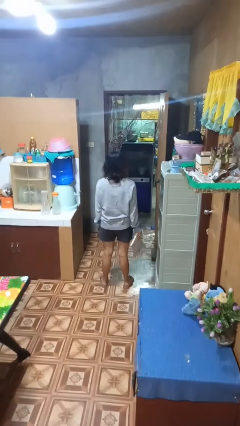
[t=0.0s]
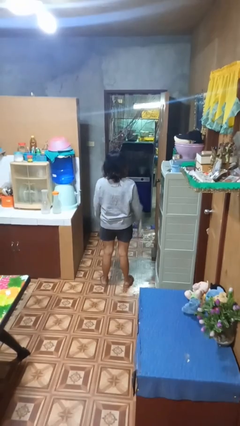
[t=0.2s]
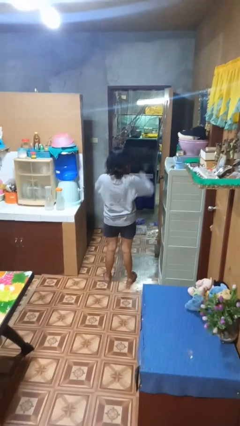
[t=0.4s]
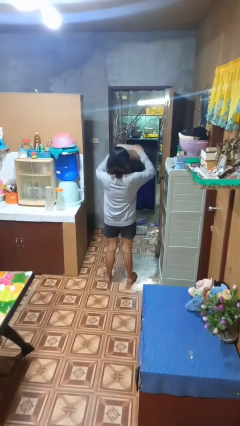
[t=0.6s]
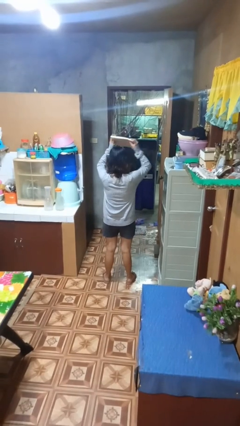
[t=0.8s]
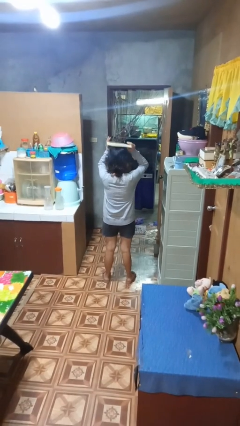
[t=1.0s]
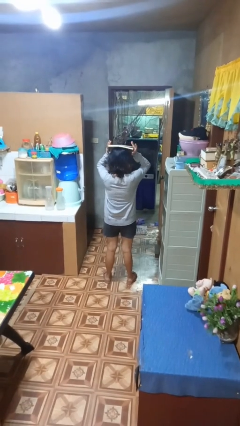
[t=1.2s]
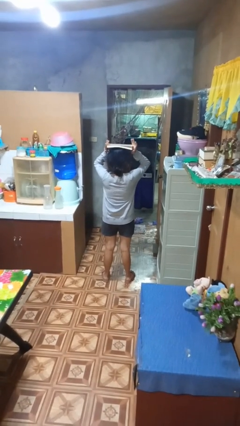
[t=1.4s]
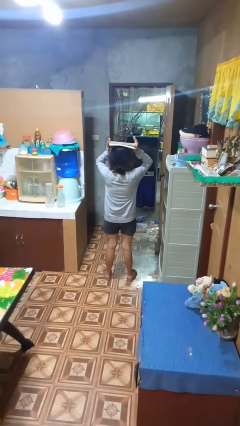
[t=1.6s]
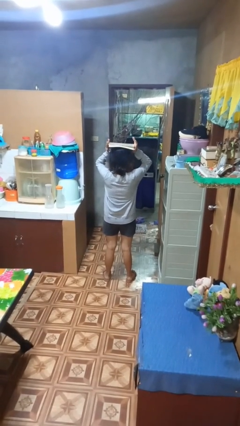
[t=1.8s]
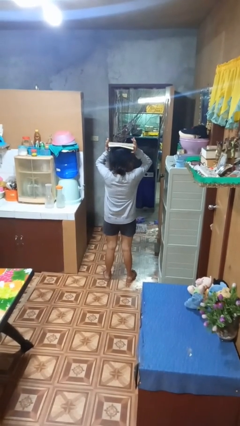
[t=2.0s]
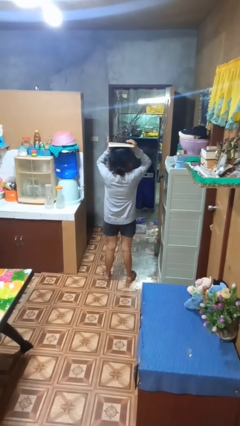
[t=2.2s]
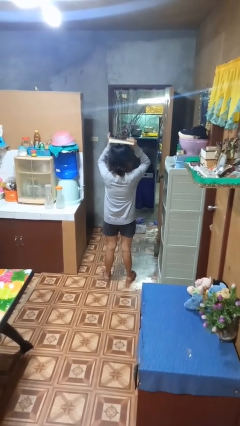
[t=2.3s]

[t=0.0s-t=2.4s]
person holds object above head

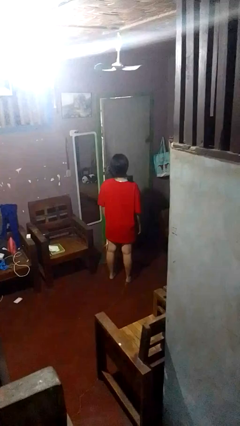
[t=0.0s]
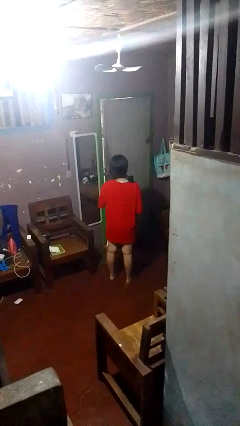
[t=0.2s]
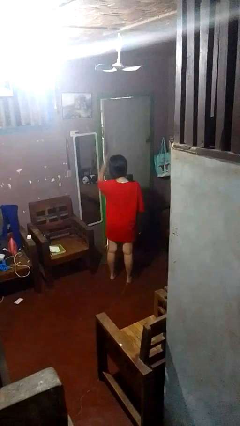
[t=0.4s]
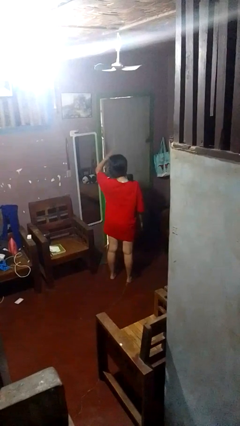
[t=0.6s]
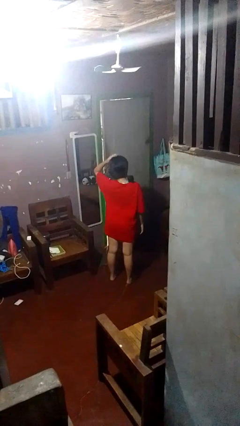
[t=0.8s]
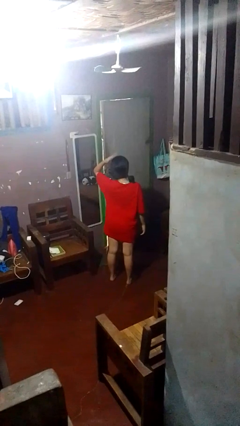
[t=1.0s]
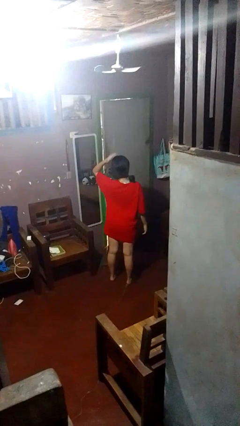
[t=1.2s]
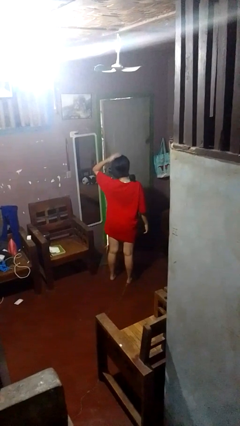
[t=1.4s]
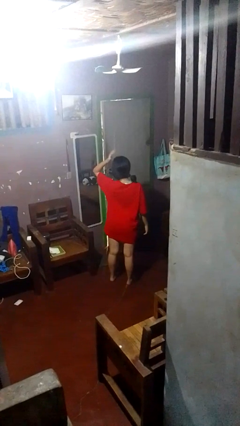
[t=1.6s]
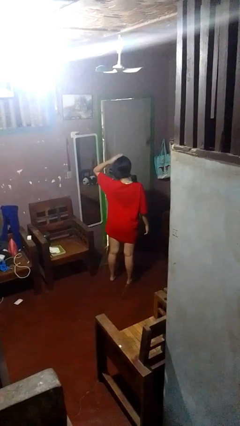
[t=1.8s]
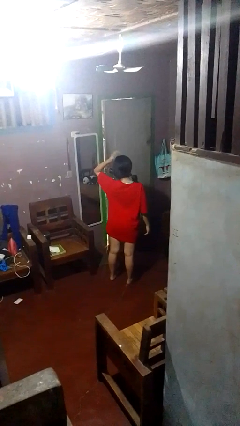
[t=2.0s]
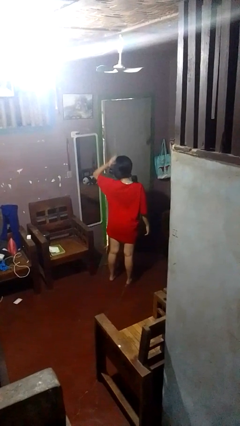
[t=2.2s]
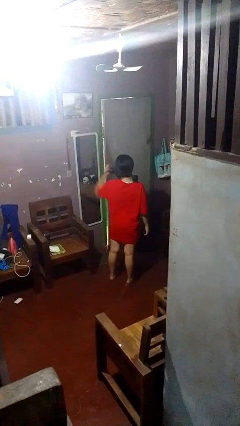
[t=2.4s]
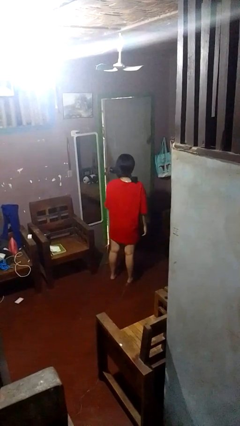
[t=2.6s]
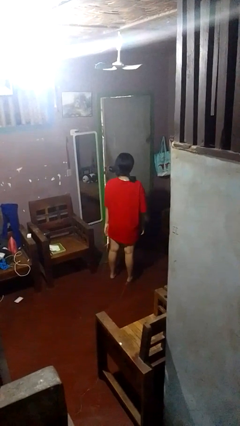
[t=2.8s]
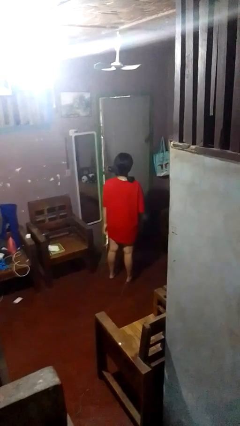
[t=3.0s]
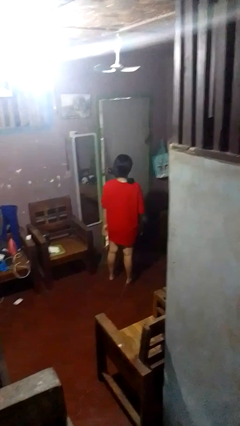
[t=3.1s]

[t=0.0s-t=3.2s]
person pats head

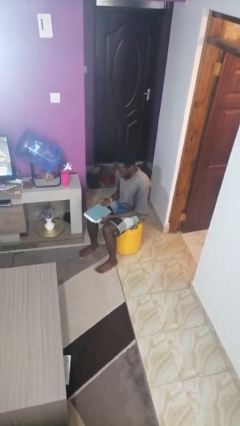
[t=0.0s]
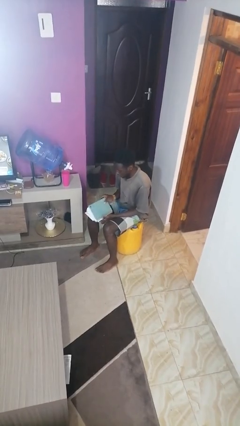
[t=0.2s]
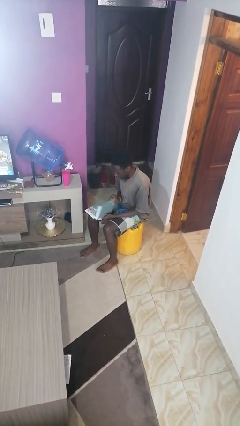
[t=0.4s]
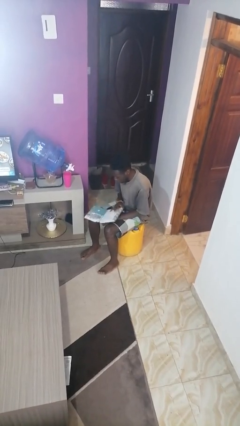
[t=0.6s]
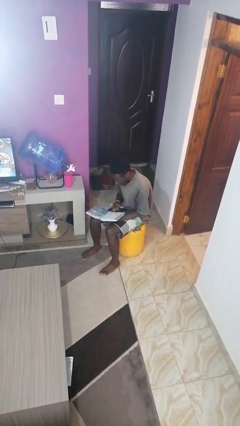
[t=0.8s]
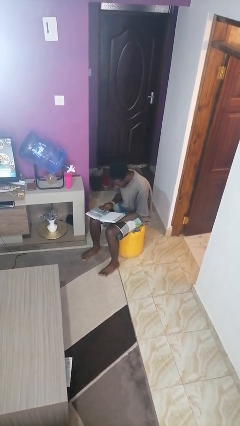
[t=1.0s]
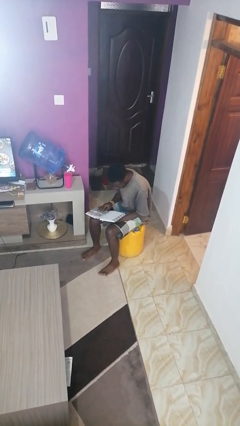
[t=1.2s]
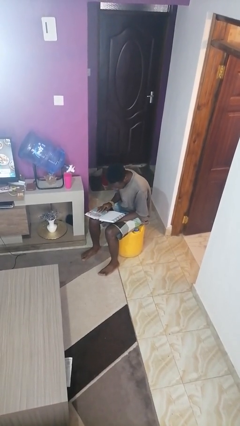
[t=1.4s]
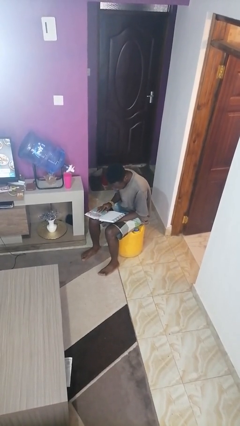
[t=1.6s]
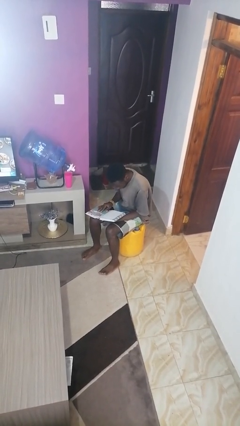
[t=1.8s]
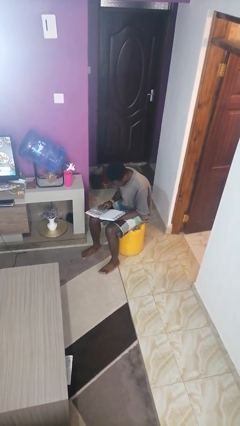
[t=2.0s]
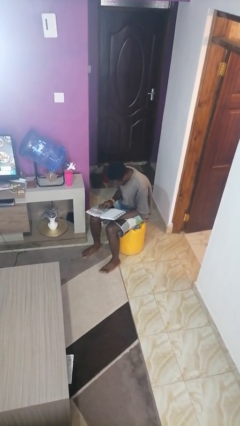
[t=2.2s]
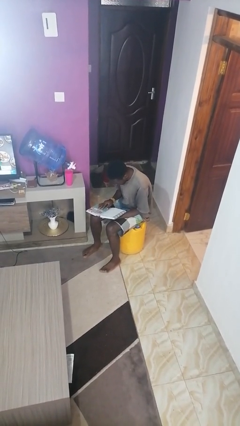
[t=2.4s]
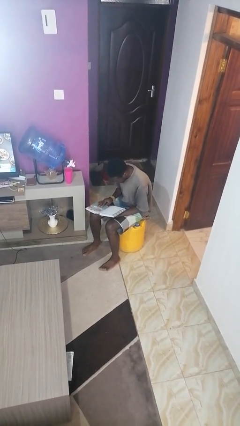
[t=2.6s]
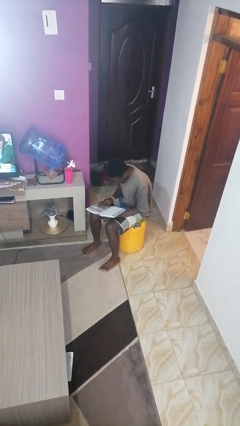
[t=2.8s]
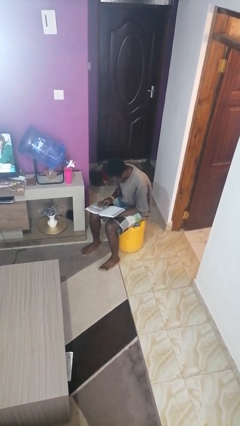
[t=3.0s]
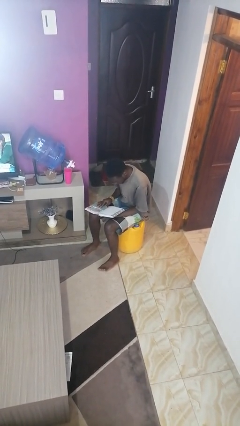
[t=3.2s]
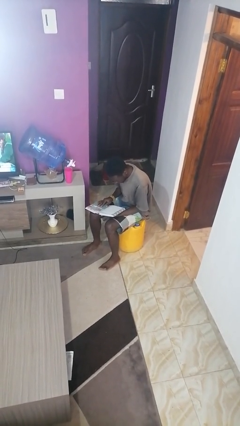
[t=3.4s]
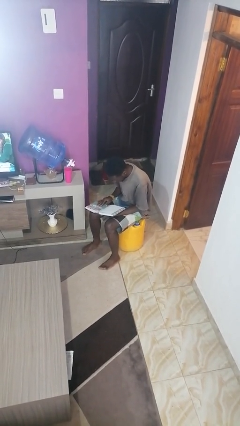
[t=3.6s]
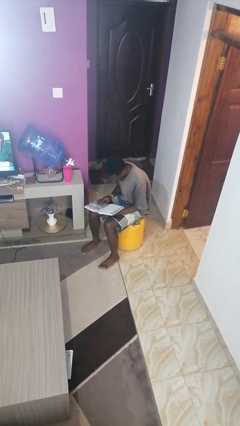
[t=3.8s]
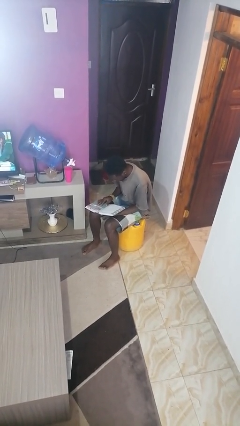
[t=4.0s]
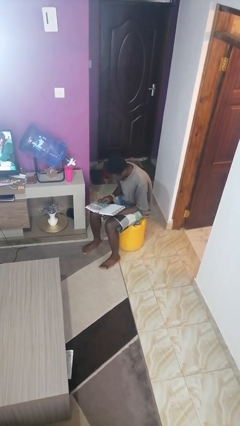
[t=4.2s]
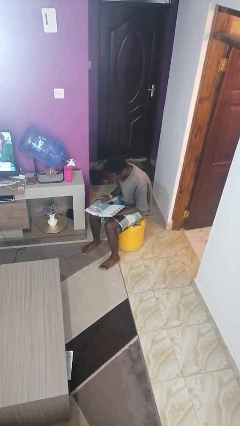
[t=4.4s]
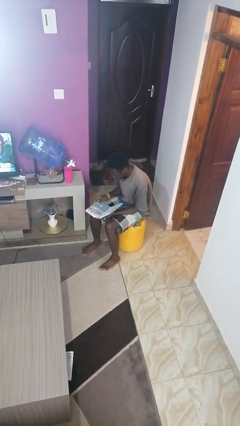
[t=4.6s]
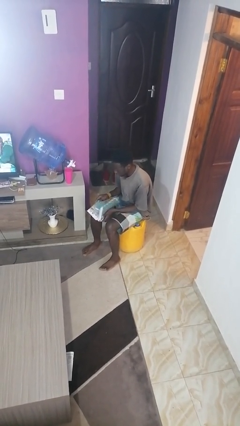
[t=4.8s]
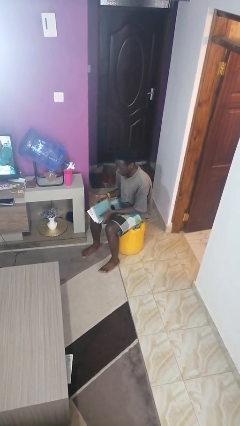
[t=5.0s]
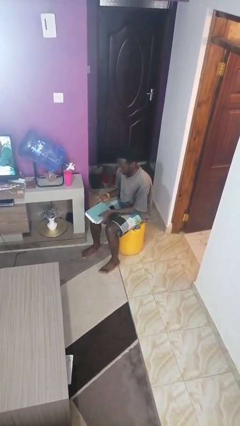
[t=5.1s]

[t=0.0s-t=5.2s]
person reads book

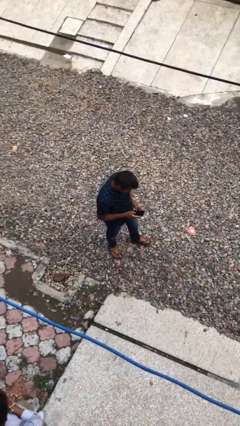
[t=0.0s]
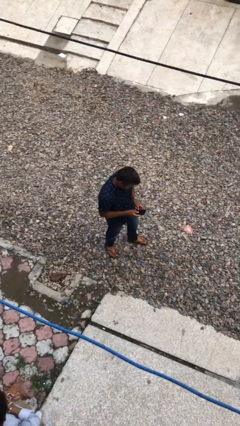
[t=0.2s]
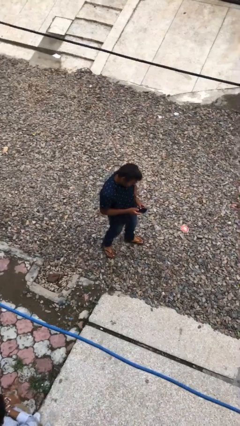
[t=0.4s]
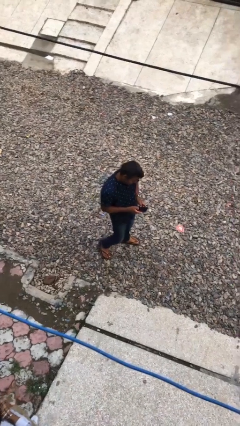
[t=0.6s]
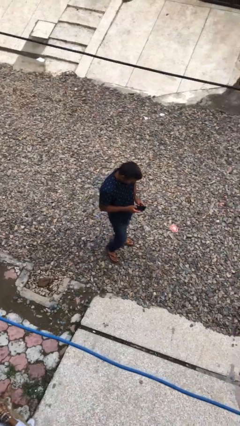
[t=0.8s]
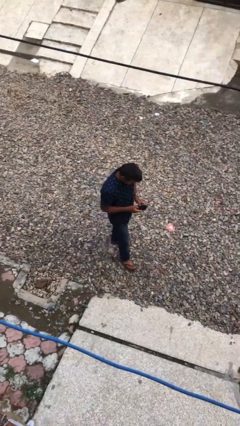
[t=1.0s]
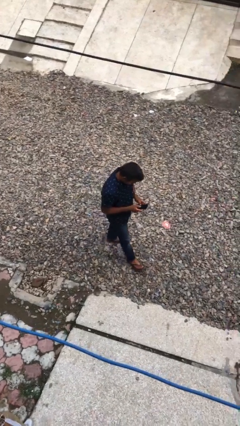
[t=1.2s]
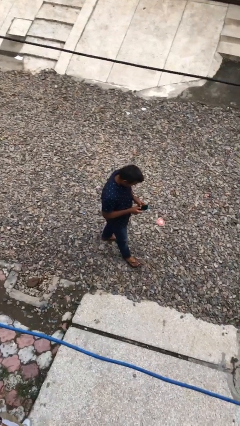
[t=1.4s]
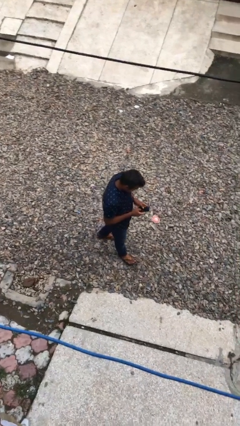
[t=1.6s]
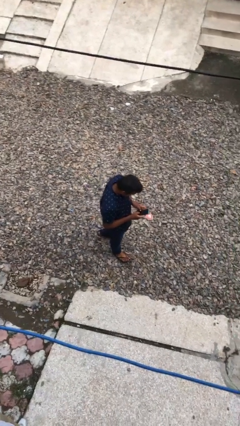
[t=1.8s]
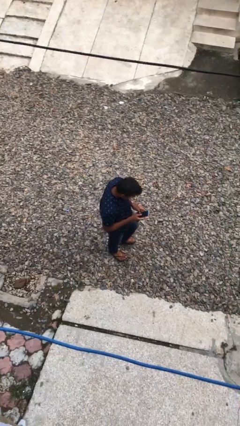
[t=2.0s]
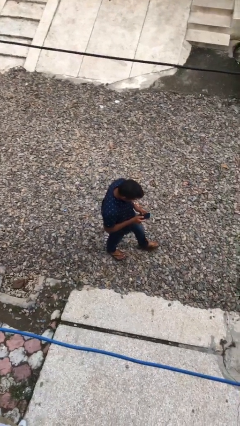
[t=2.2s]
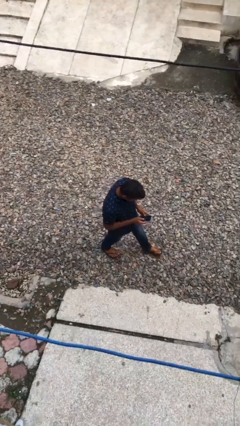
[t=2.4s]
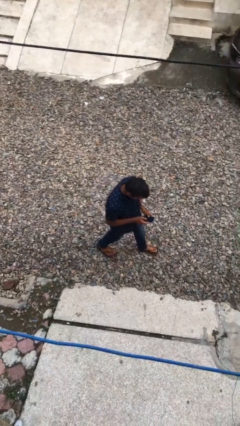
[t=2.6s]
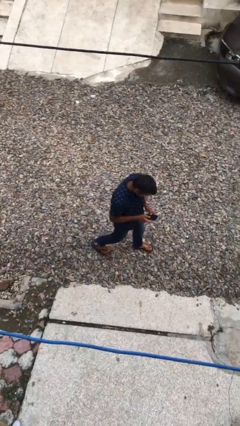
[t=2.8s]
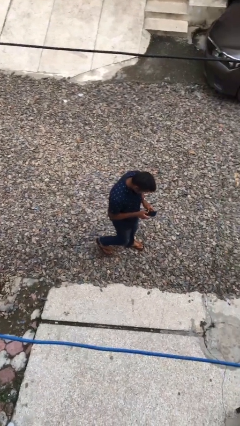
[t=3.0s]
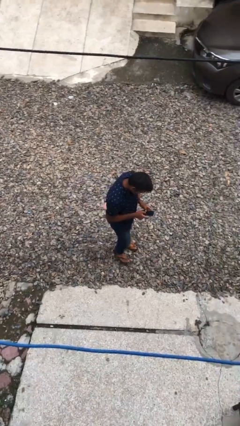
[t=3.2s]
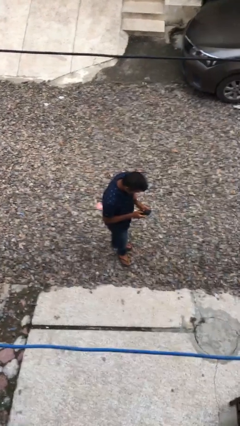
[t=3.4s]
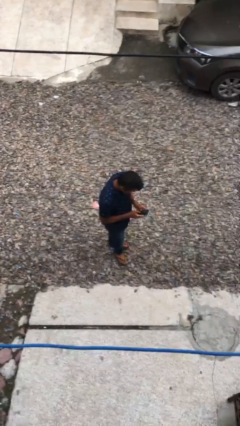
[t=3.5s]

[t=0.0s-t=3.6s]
person texts on phone

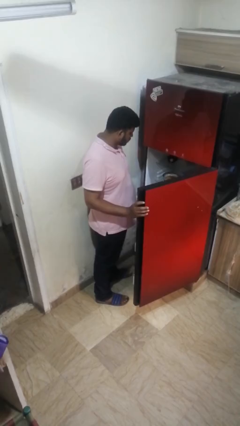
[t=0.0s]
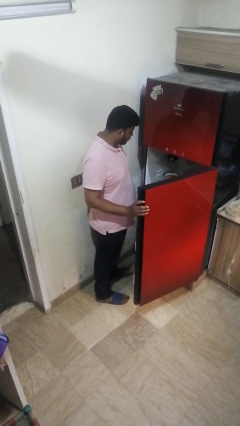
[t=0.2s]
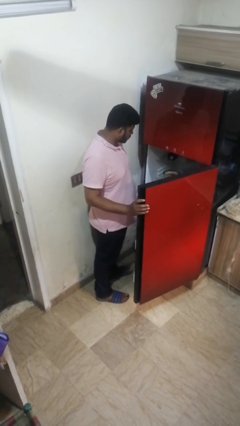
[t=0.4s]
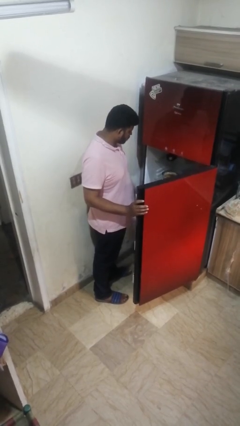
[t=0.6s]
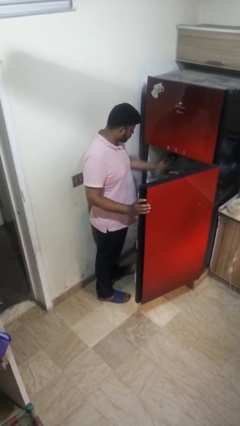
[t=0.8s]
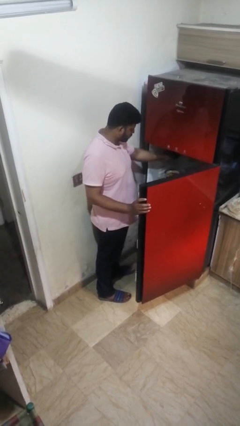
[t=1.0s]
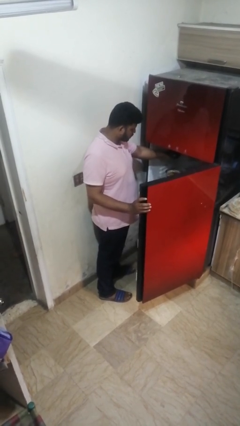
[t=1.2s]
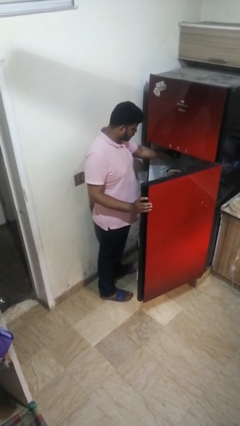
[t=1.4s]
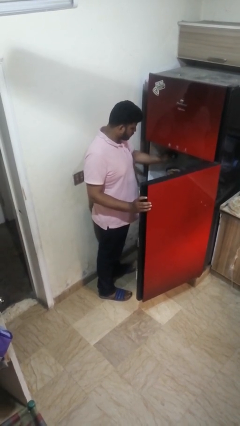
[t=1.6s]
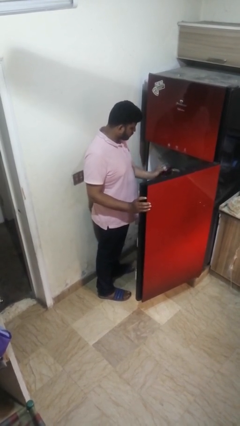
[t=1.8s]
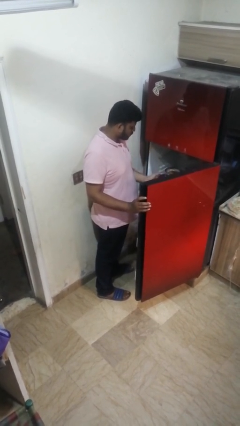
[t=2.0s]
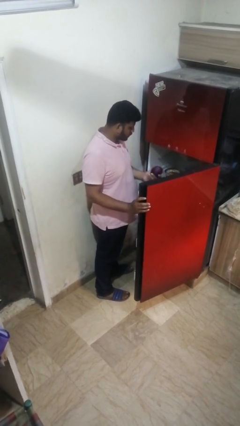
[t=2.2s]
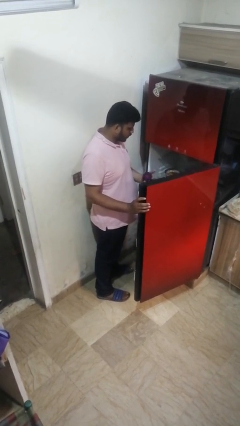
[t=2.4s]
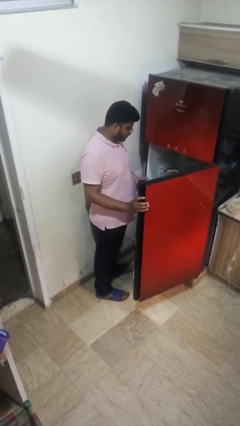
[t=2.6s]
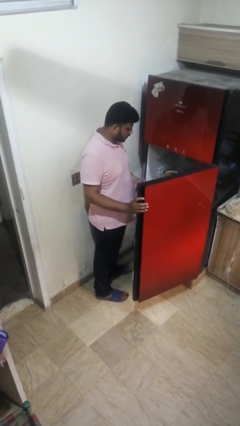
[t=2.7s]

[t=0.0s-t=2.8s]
person takes object from refrigerator
